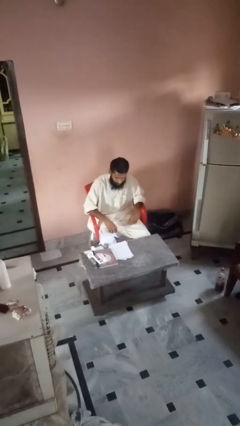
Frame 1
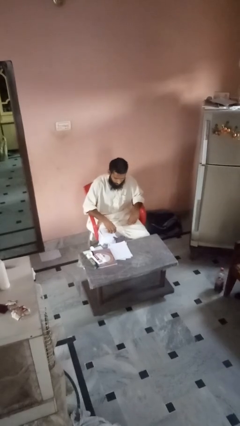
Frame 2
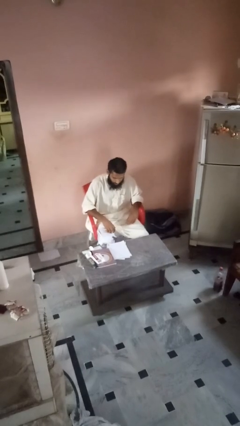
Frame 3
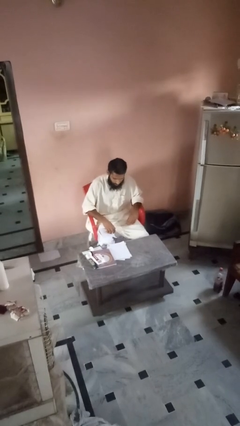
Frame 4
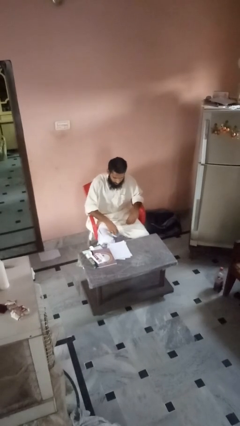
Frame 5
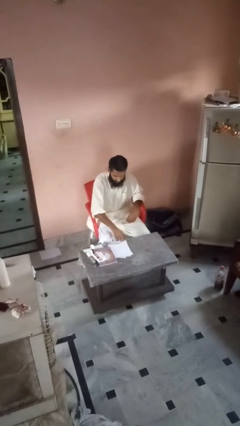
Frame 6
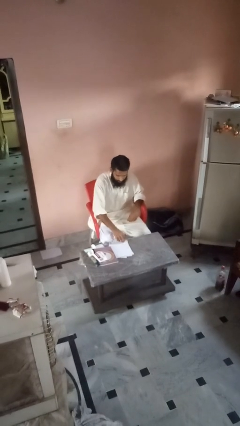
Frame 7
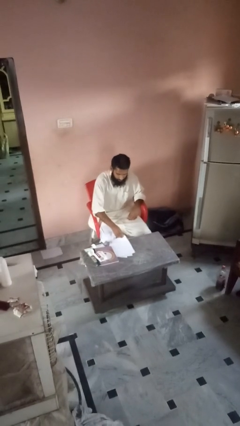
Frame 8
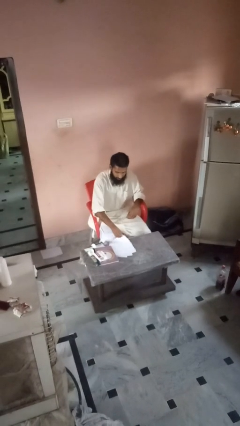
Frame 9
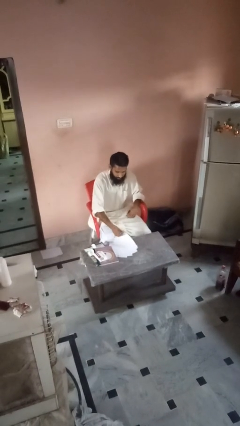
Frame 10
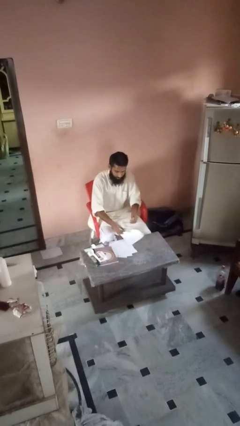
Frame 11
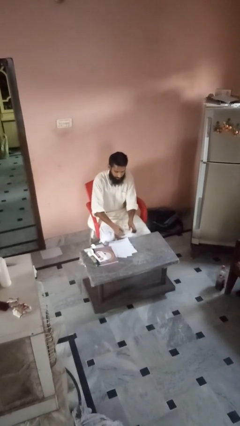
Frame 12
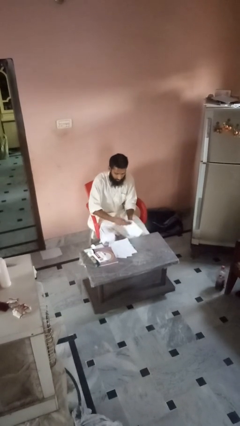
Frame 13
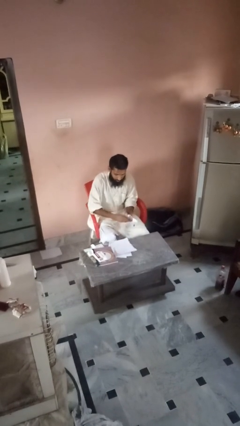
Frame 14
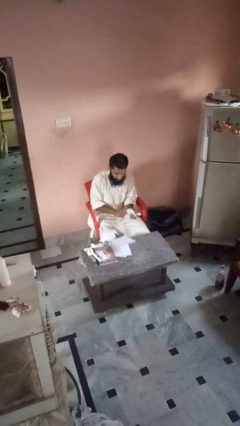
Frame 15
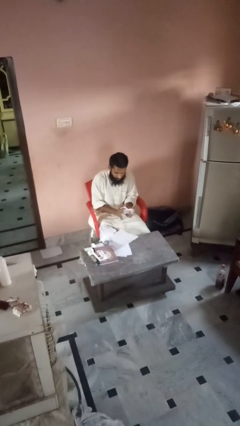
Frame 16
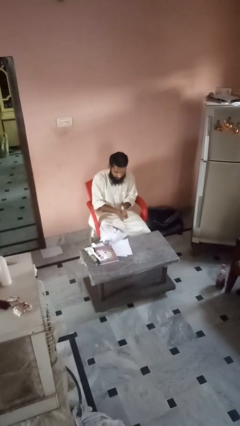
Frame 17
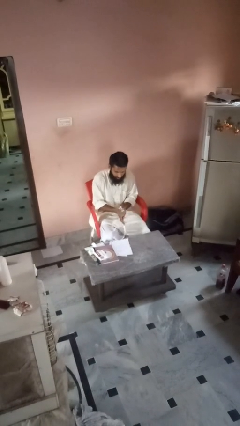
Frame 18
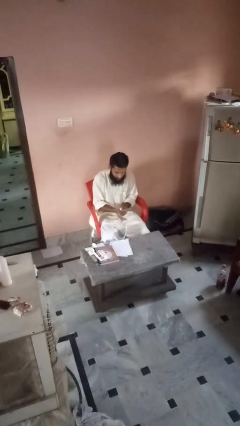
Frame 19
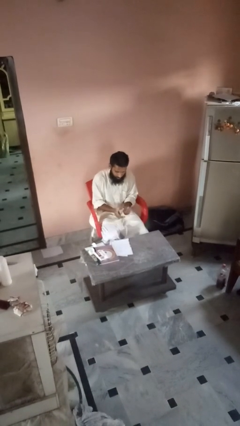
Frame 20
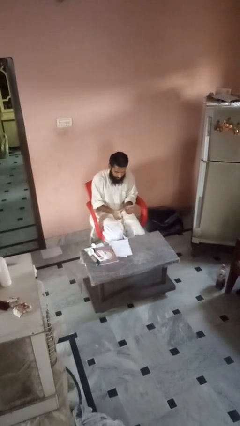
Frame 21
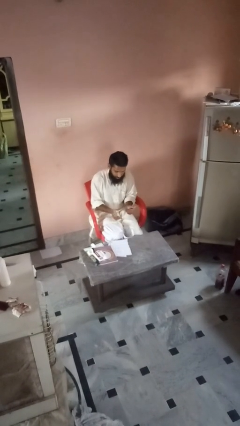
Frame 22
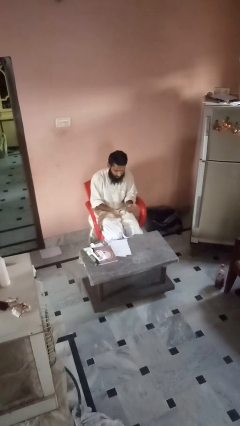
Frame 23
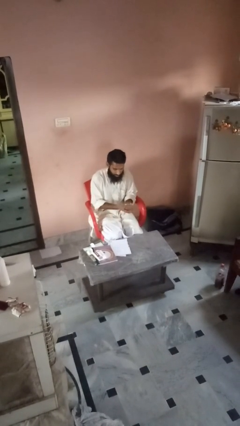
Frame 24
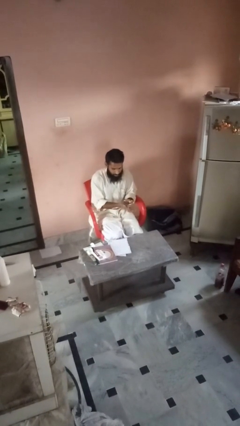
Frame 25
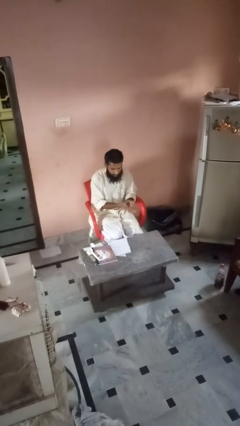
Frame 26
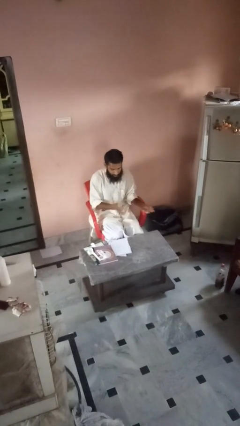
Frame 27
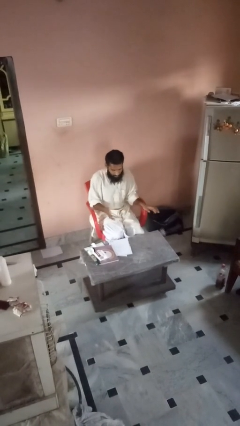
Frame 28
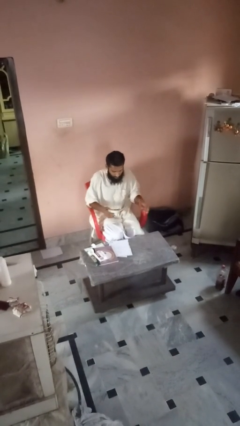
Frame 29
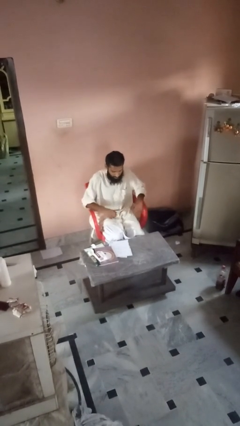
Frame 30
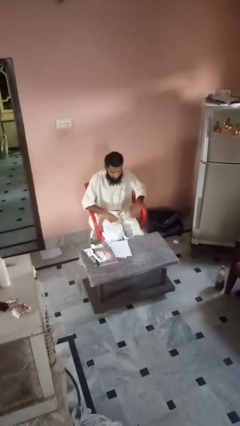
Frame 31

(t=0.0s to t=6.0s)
person crumples paper

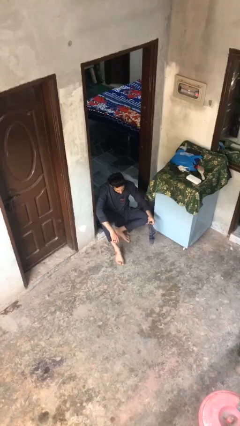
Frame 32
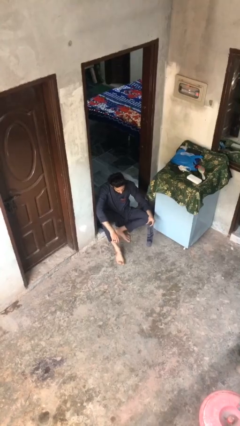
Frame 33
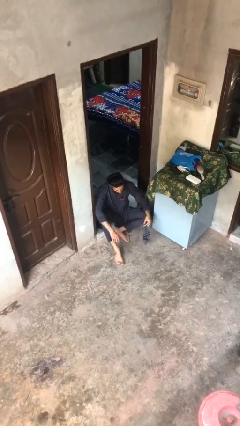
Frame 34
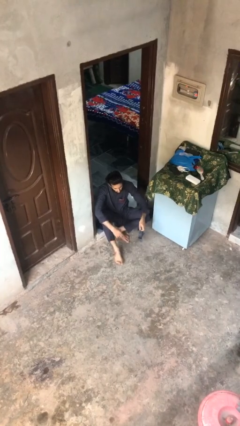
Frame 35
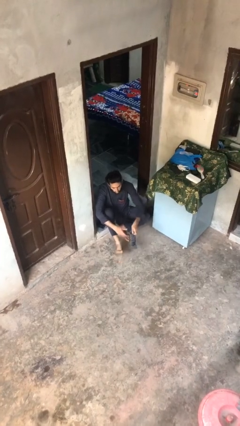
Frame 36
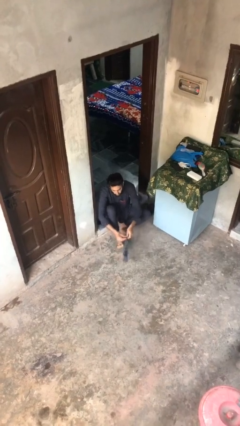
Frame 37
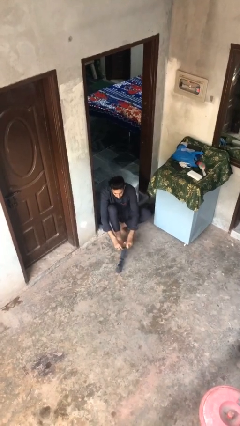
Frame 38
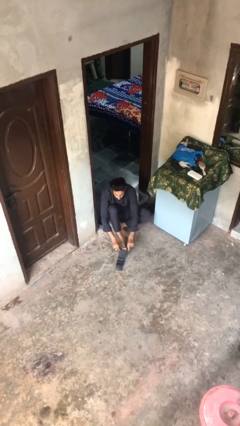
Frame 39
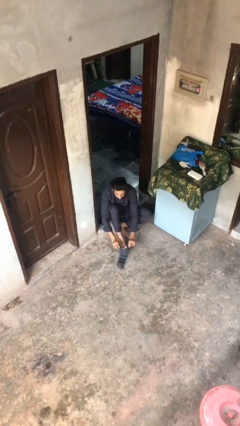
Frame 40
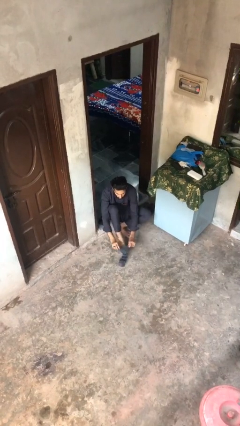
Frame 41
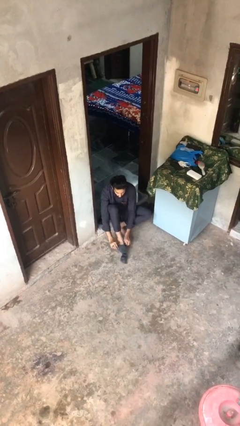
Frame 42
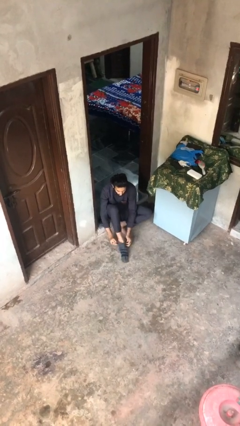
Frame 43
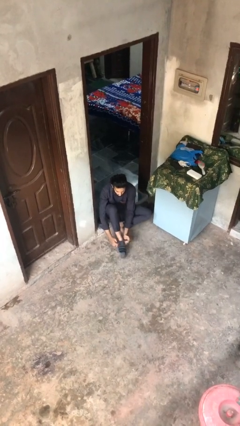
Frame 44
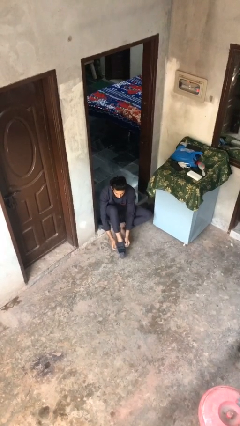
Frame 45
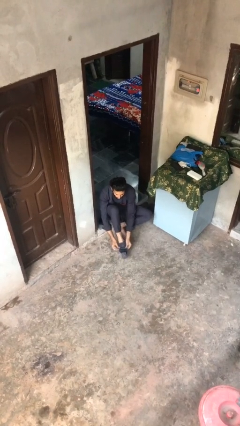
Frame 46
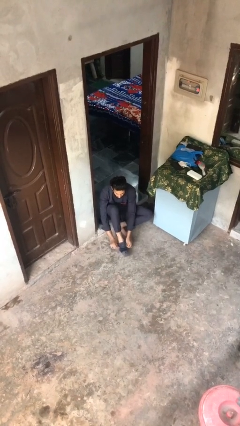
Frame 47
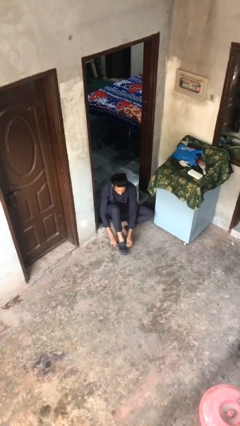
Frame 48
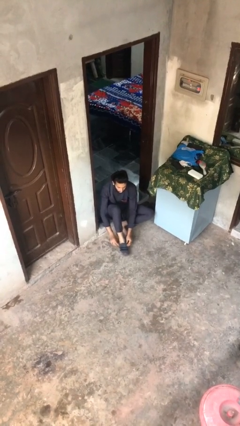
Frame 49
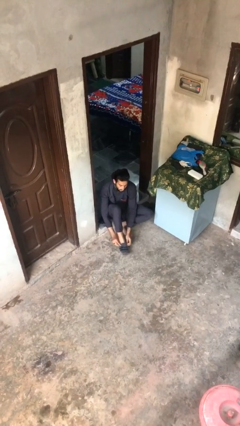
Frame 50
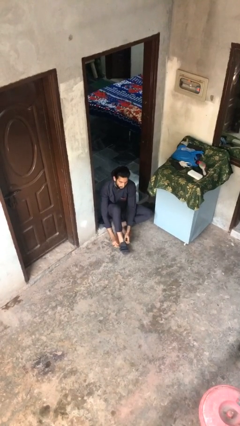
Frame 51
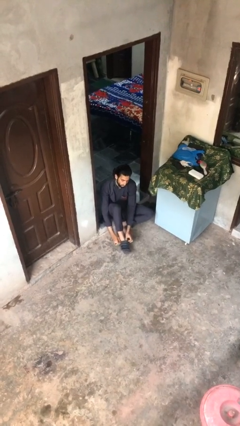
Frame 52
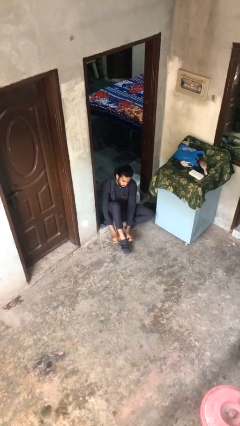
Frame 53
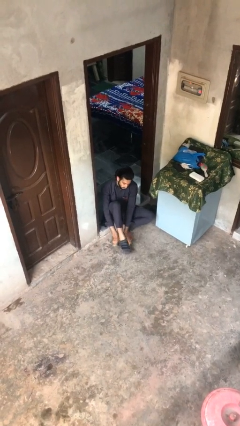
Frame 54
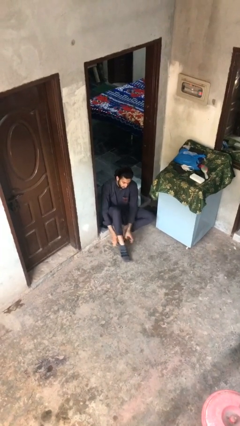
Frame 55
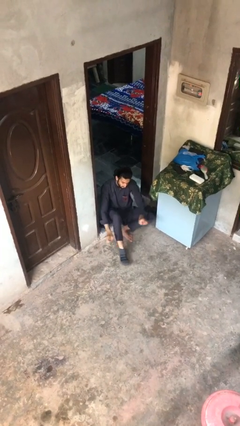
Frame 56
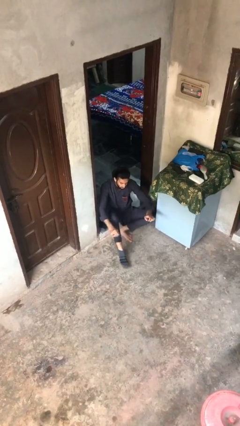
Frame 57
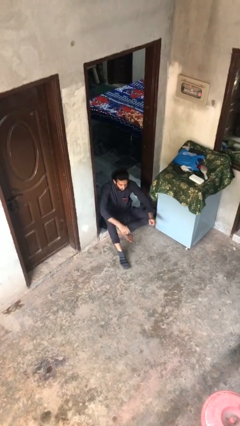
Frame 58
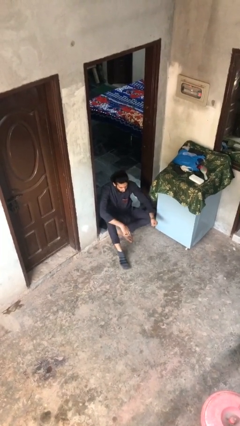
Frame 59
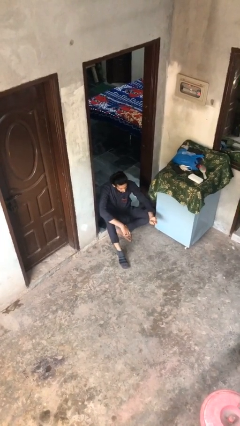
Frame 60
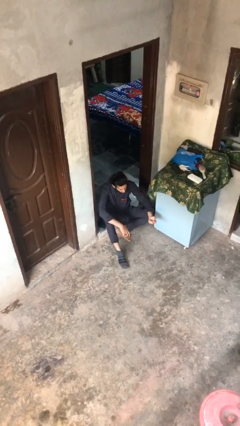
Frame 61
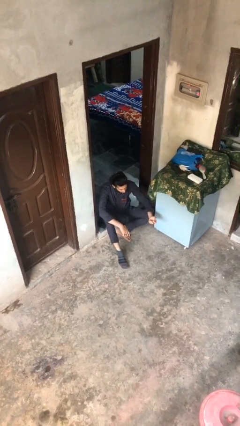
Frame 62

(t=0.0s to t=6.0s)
person puts on socks

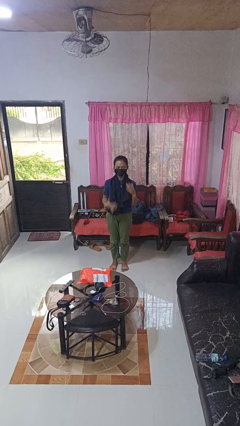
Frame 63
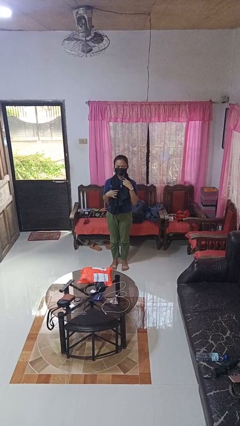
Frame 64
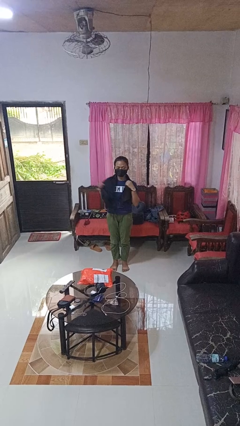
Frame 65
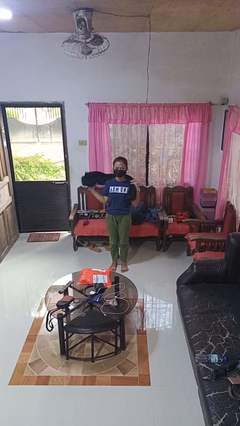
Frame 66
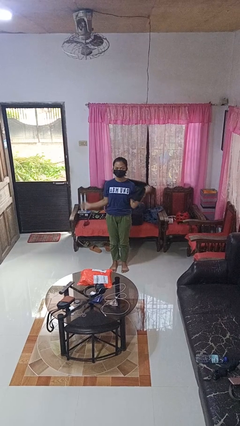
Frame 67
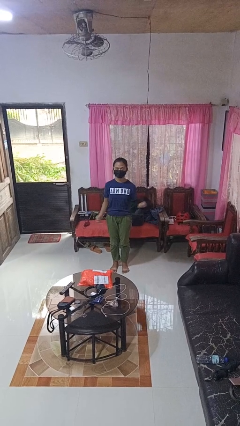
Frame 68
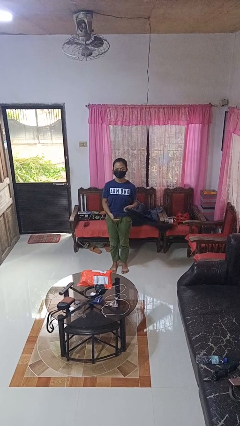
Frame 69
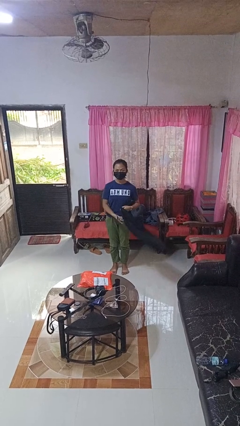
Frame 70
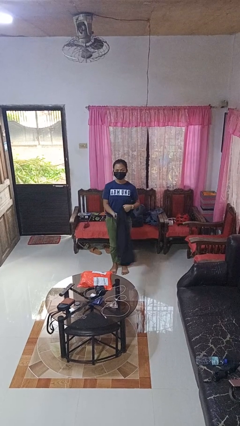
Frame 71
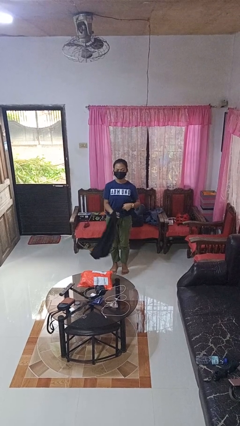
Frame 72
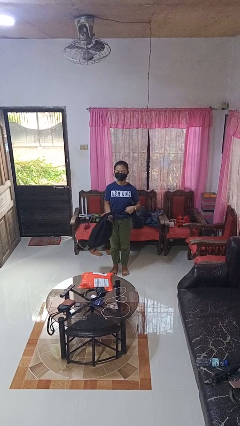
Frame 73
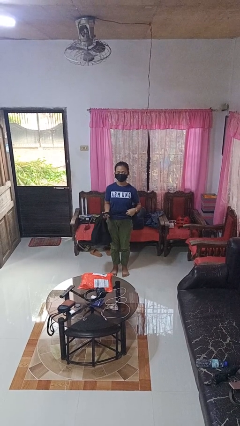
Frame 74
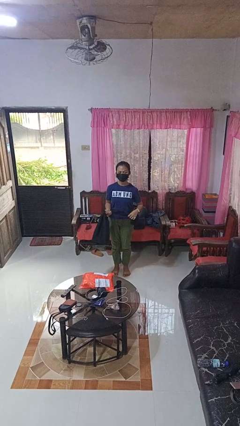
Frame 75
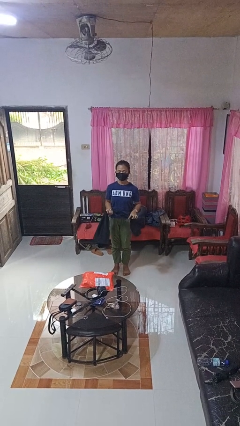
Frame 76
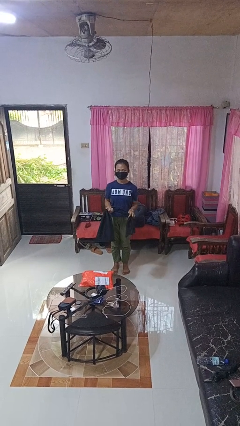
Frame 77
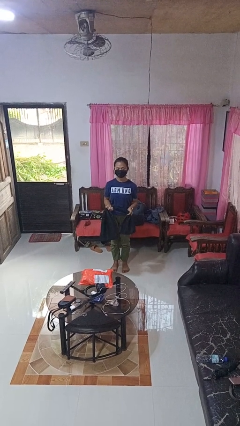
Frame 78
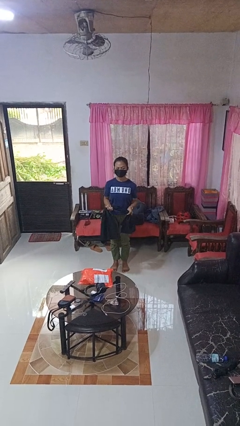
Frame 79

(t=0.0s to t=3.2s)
person takes off scarf

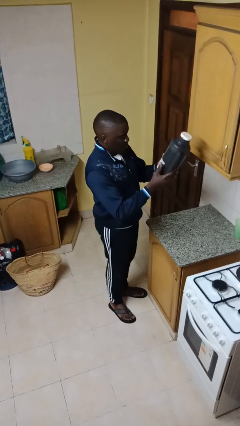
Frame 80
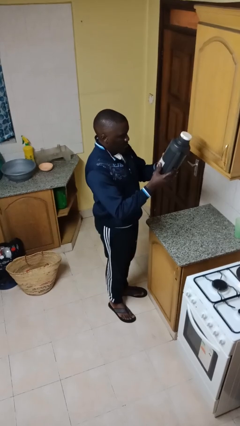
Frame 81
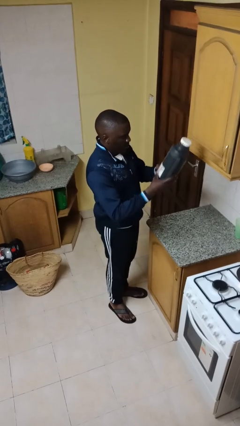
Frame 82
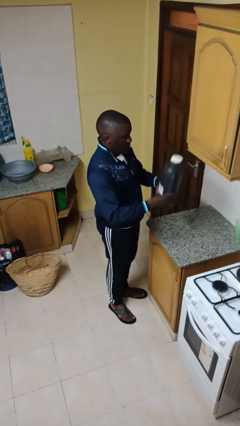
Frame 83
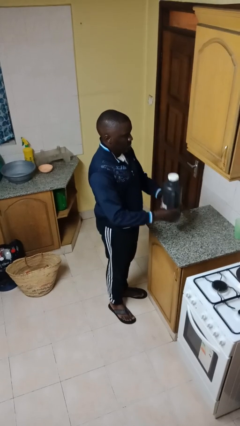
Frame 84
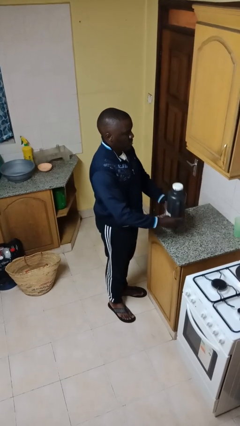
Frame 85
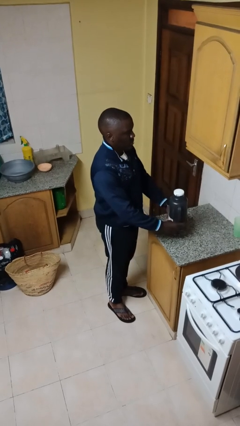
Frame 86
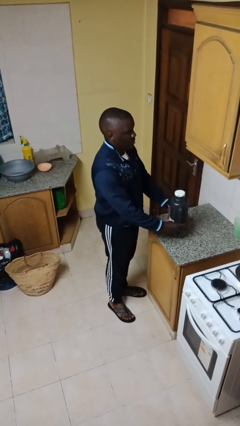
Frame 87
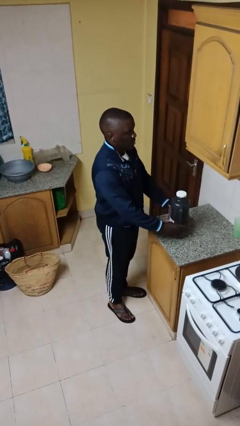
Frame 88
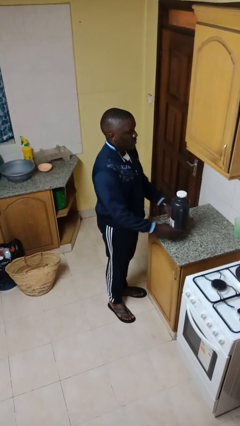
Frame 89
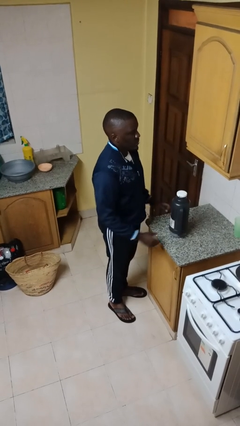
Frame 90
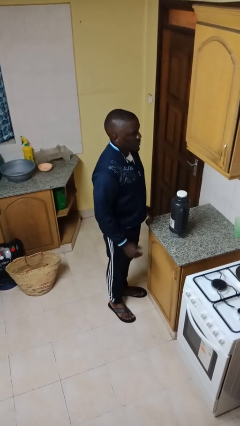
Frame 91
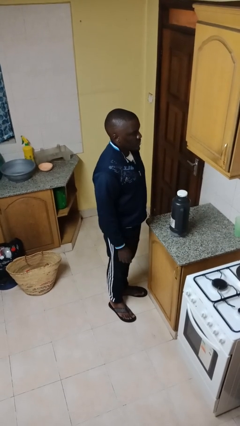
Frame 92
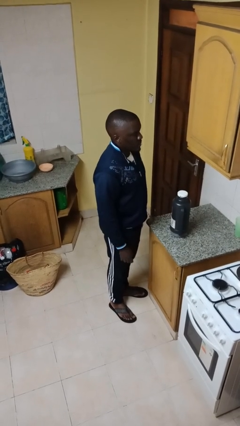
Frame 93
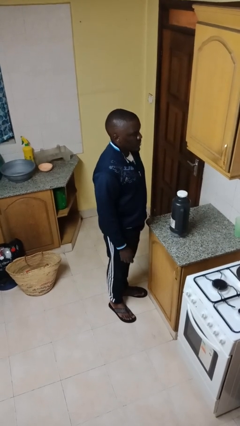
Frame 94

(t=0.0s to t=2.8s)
person puts down object on countertop
